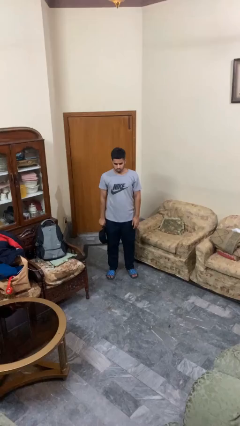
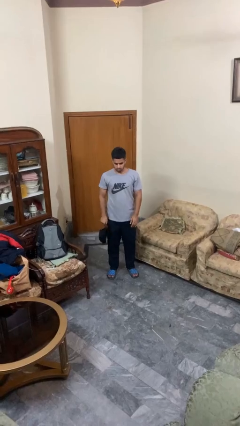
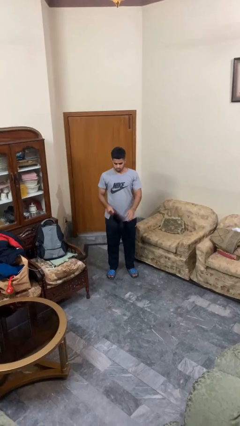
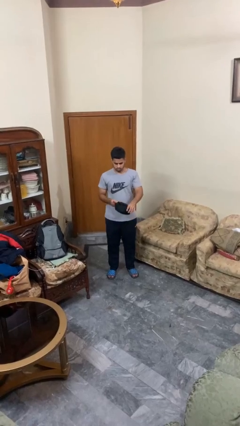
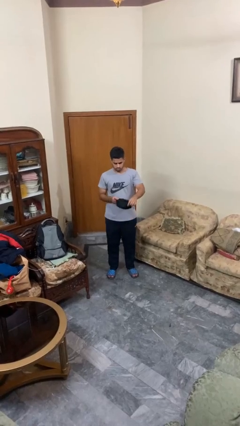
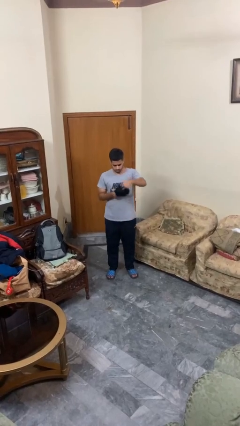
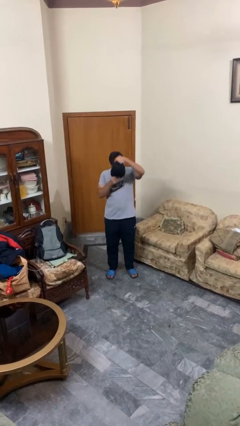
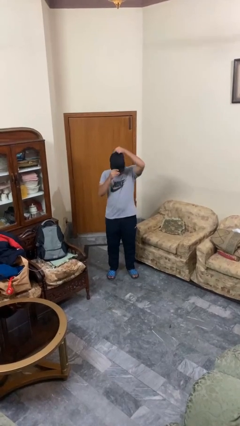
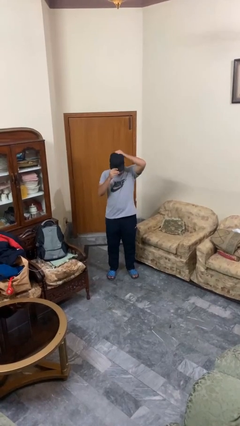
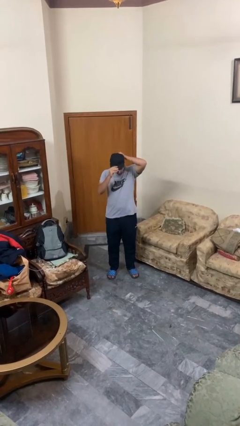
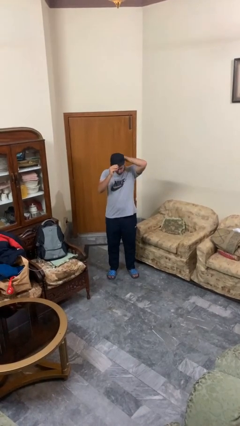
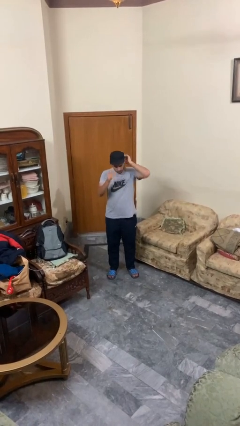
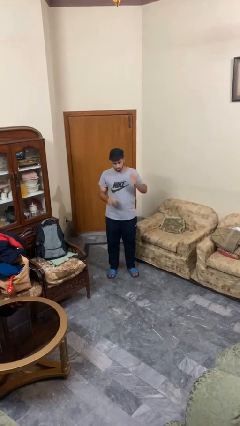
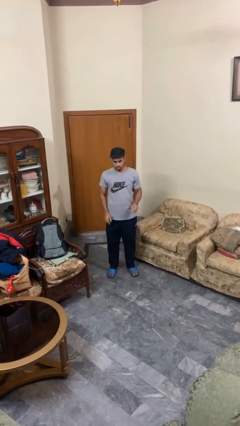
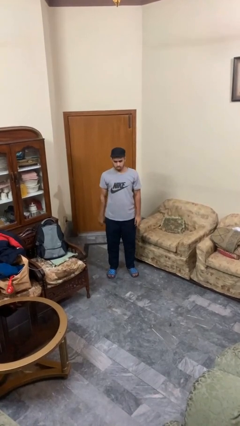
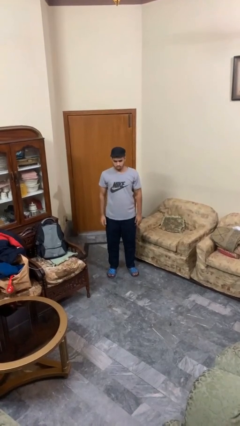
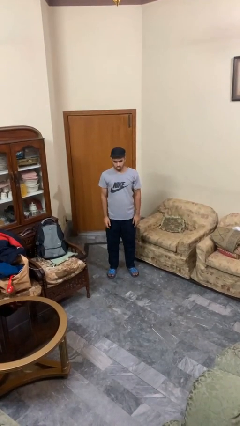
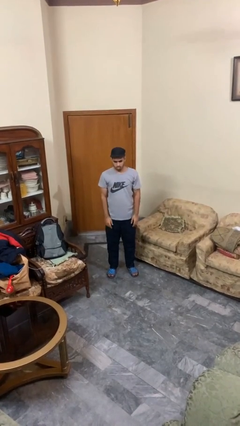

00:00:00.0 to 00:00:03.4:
person puts on hat

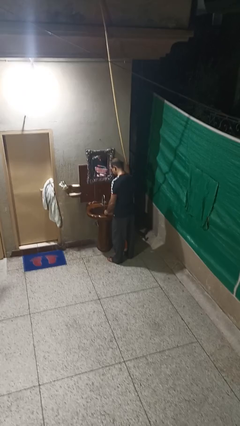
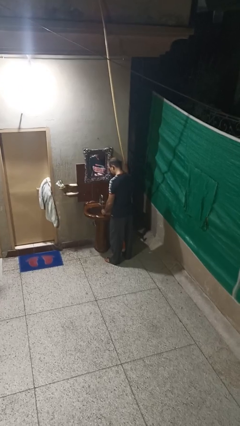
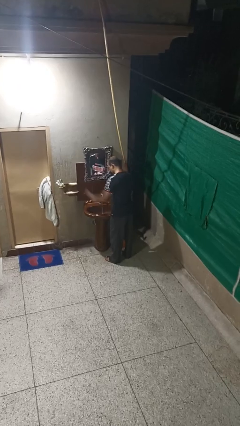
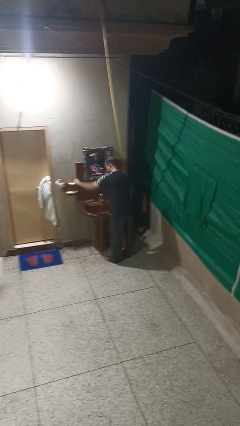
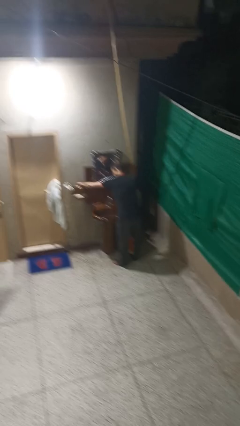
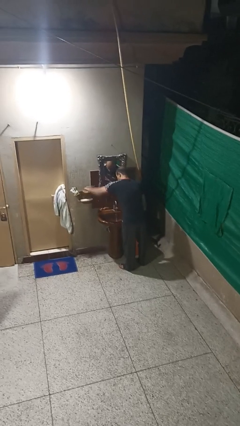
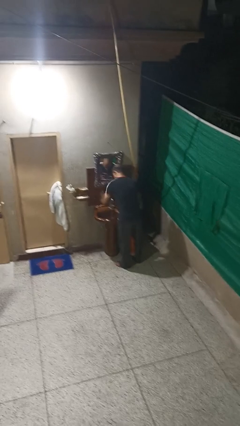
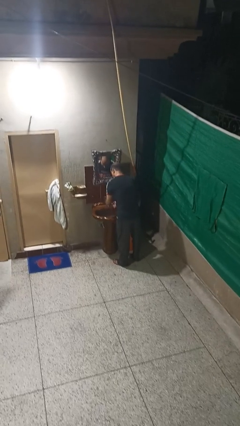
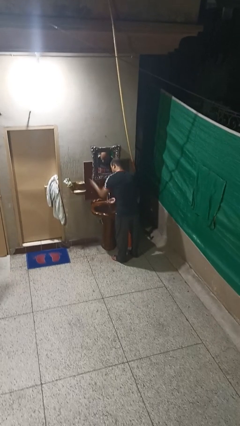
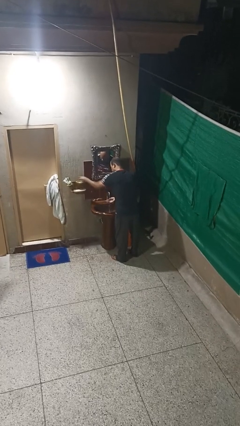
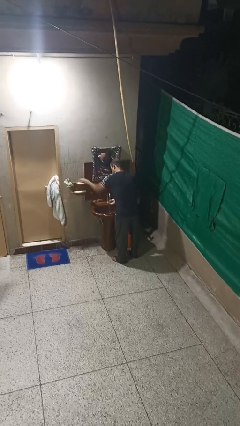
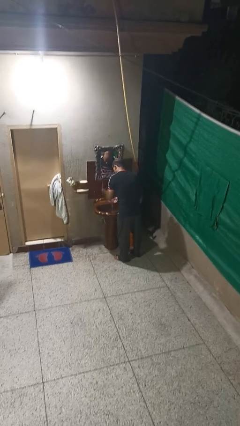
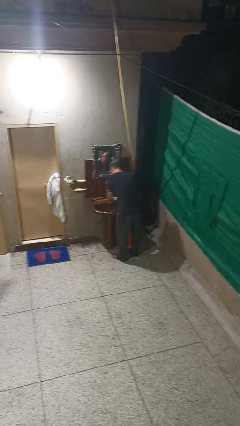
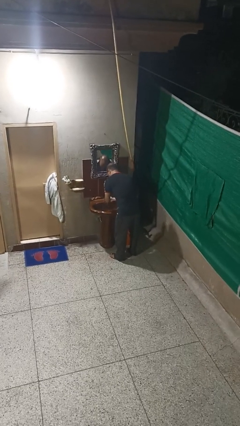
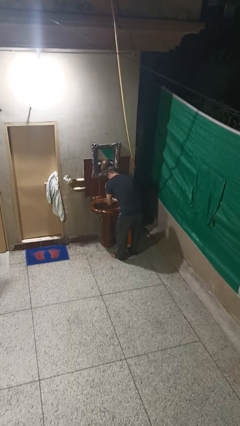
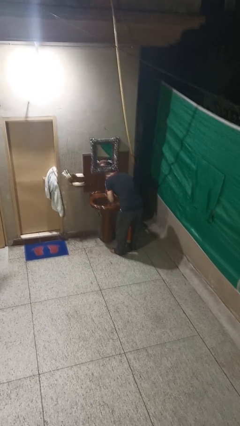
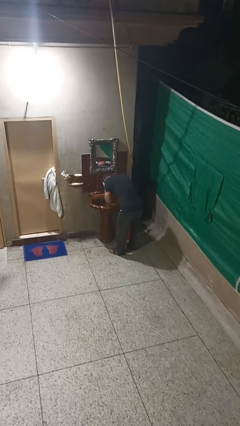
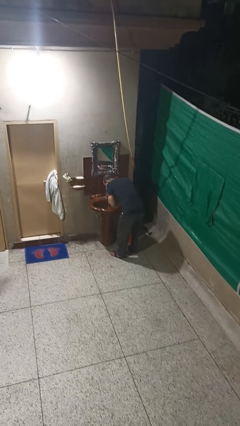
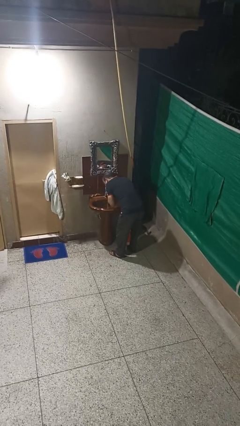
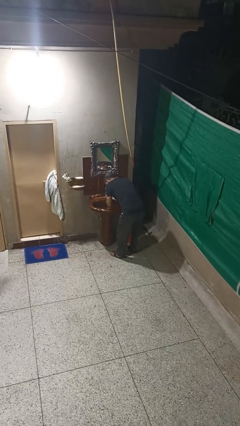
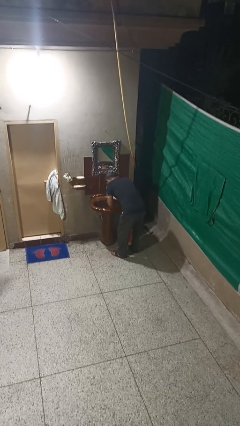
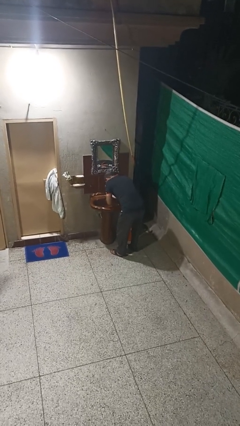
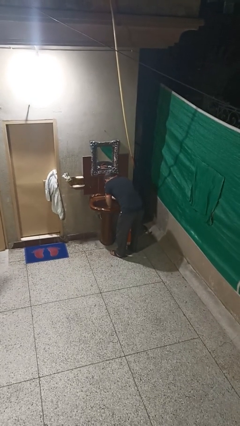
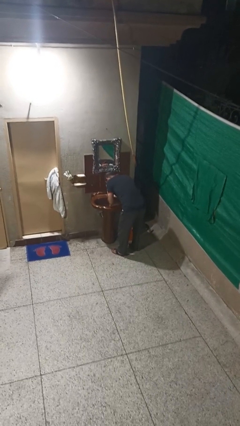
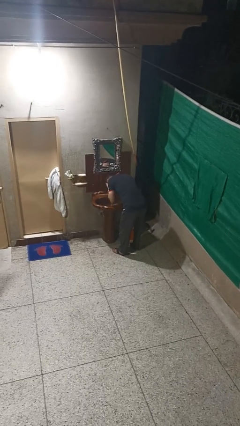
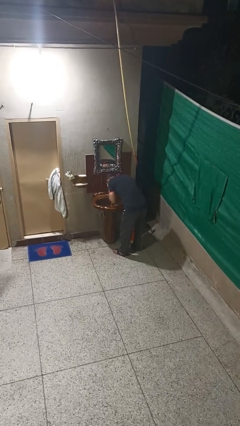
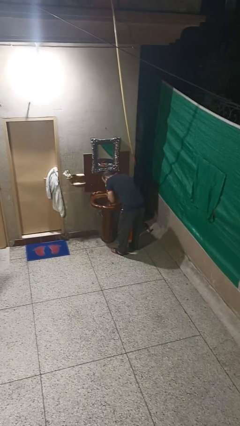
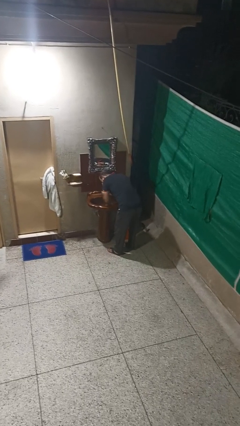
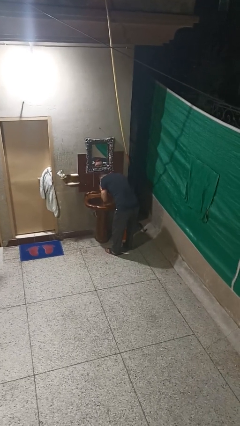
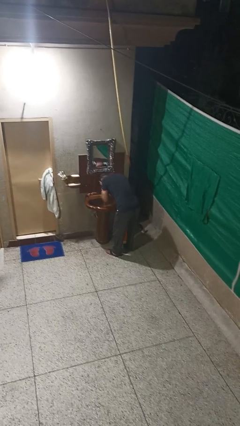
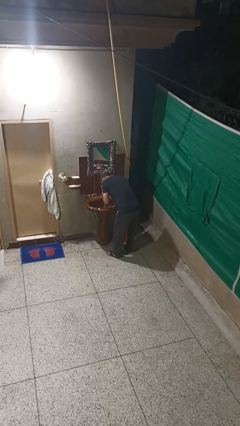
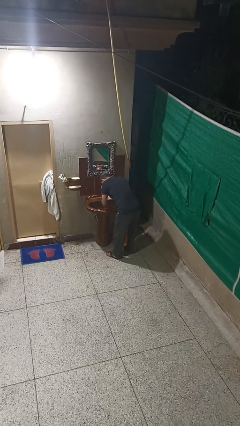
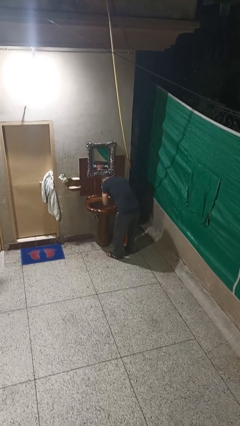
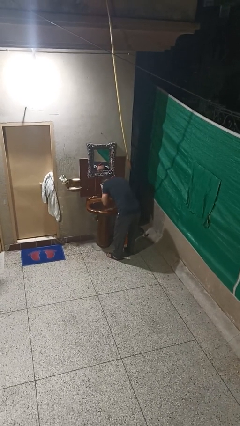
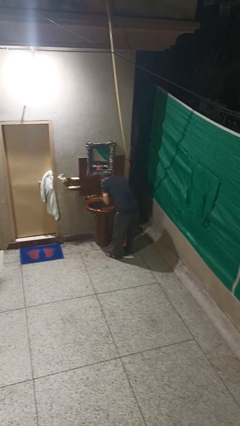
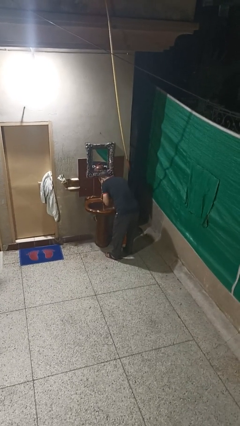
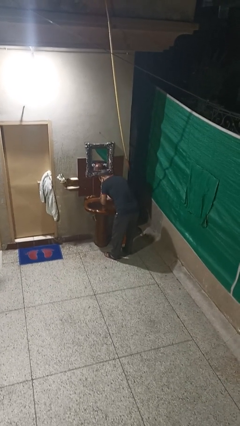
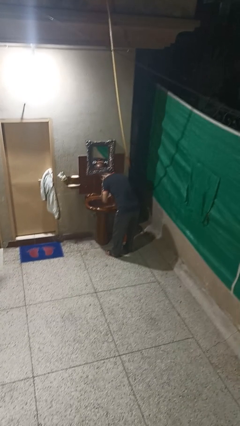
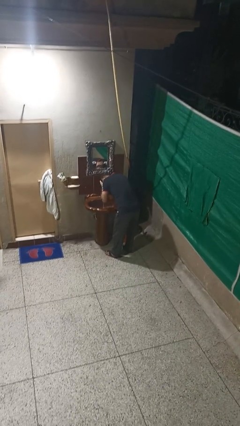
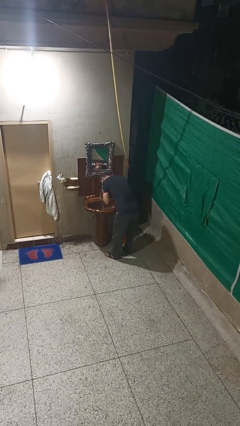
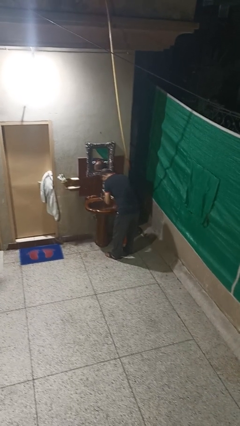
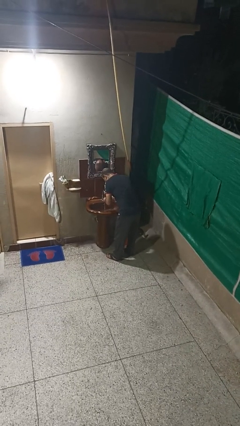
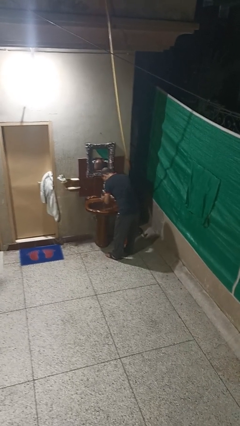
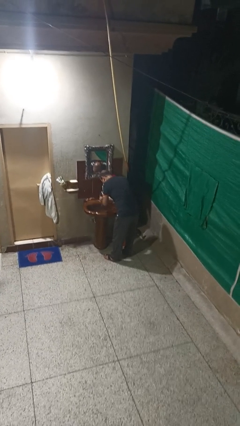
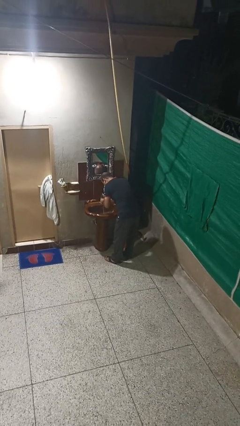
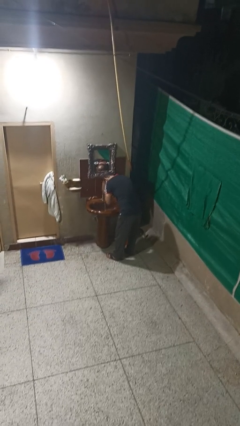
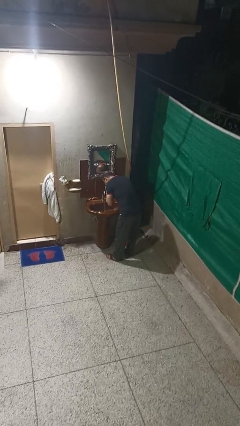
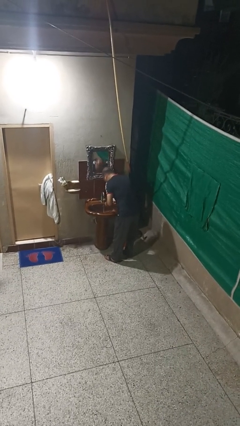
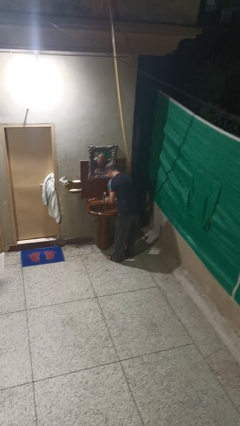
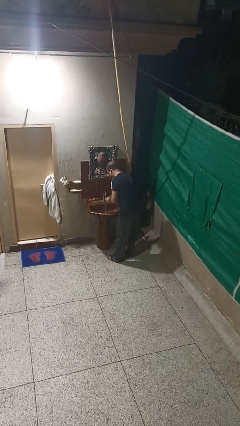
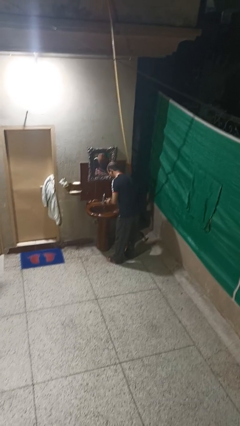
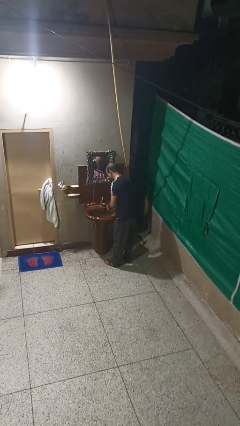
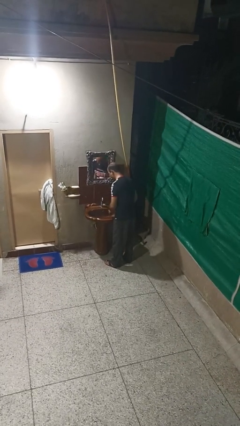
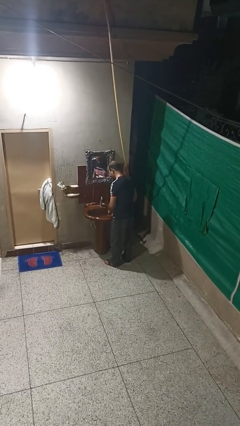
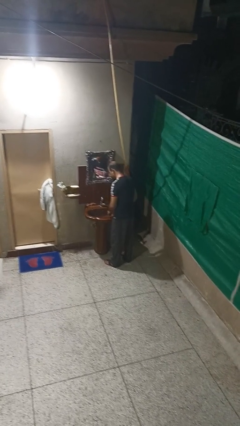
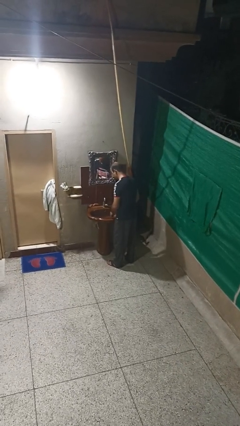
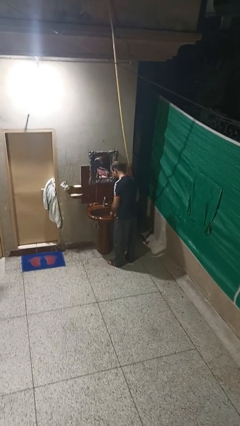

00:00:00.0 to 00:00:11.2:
person washes face

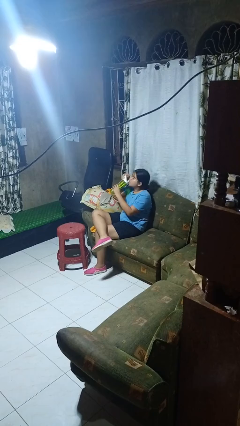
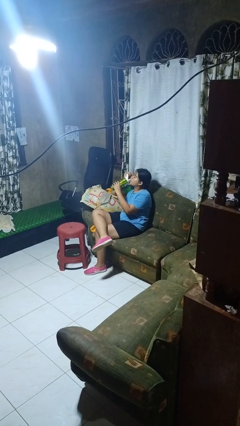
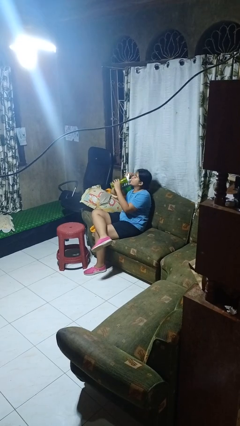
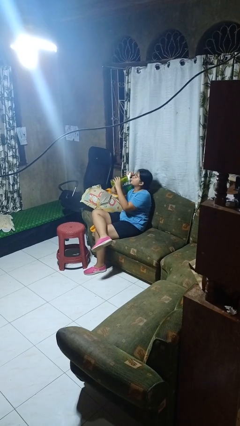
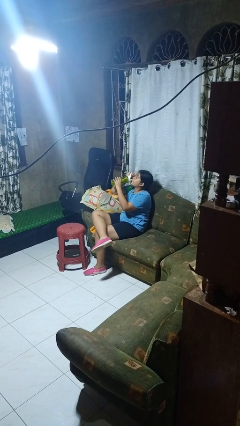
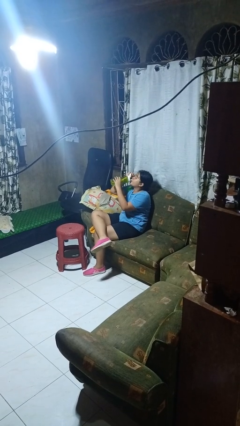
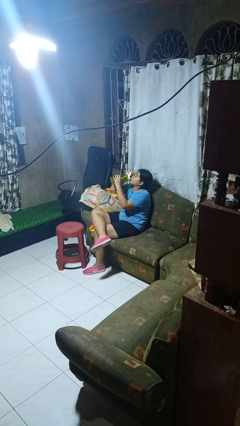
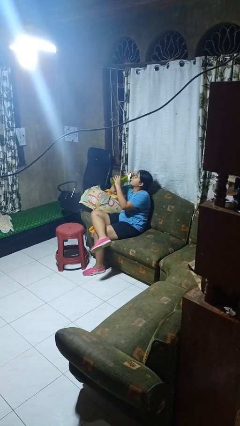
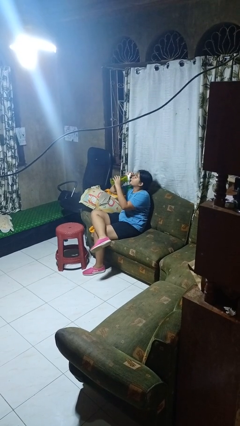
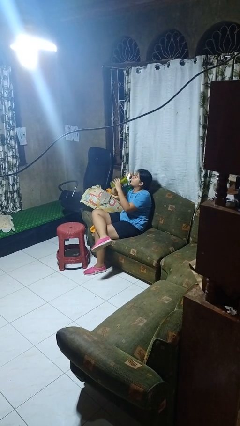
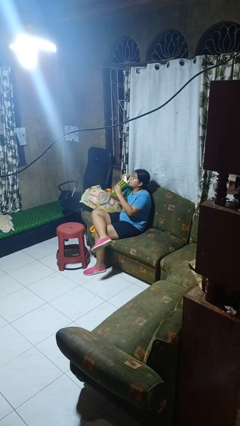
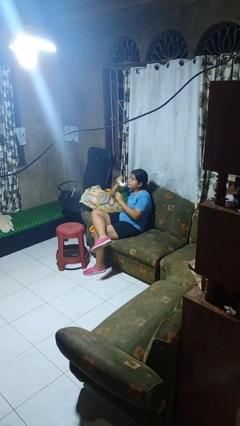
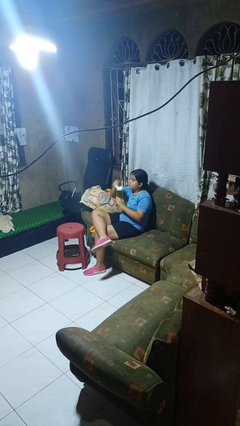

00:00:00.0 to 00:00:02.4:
person drinks from bottle

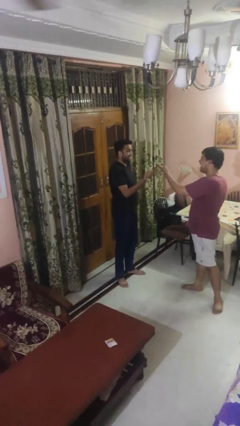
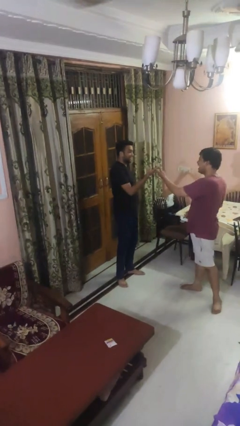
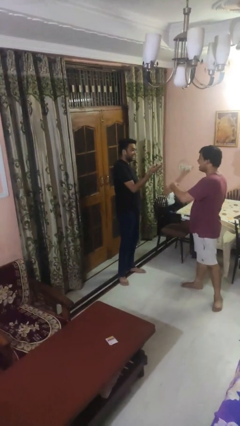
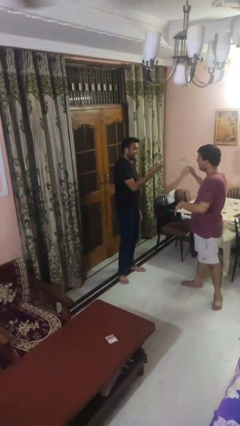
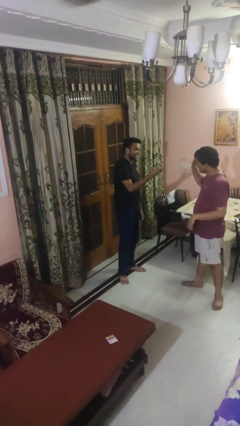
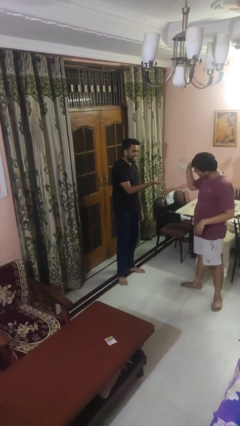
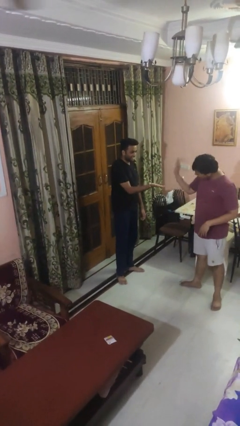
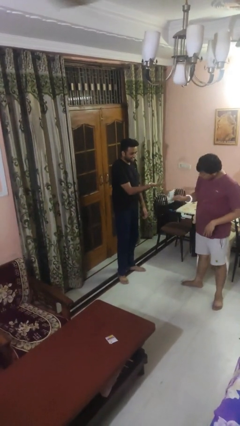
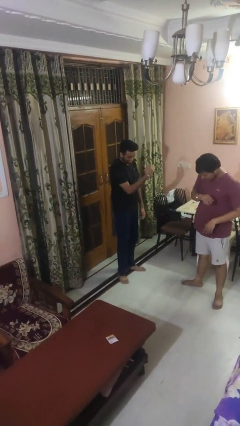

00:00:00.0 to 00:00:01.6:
person laughs with person
